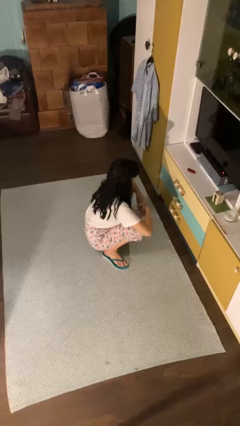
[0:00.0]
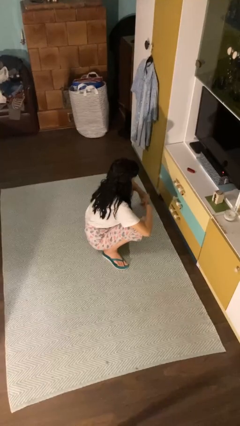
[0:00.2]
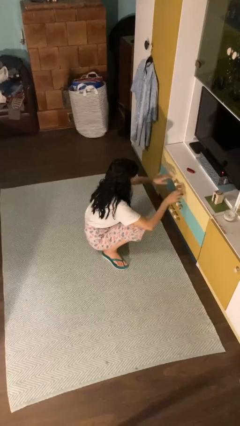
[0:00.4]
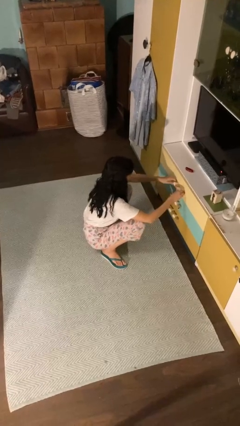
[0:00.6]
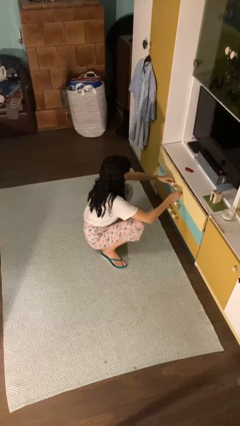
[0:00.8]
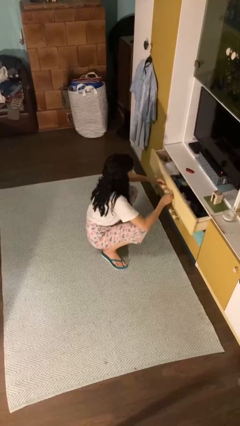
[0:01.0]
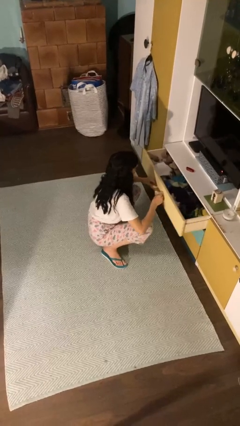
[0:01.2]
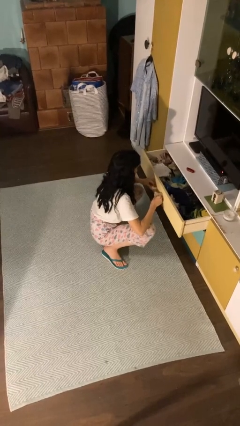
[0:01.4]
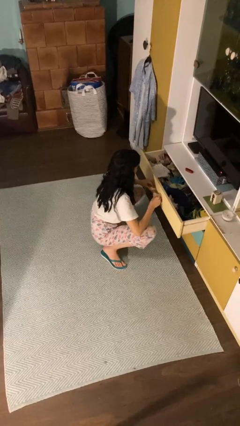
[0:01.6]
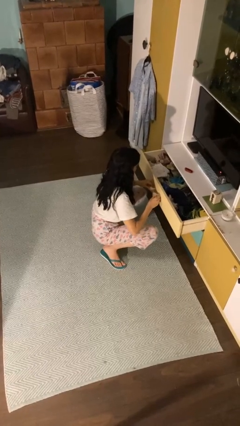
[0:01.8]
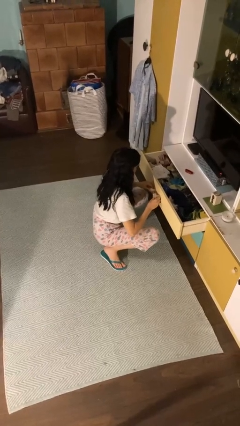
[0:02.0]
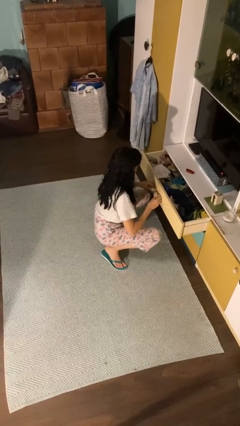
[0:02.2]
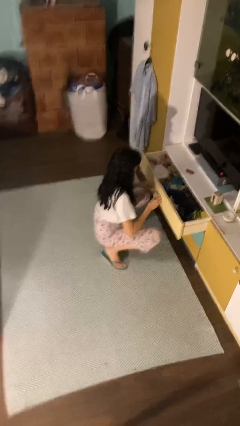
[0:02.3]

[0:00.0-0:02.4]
person opens dresser drawer

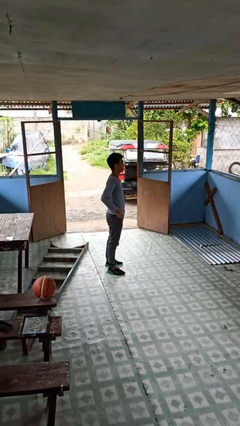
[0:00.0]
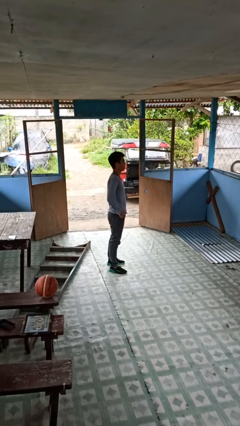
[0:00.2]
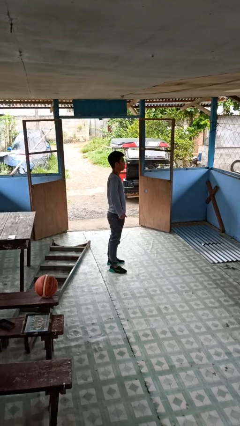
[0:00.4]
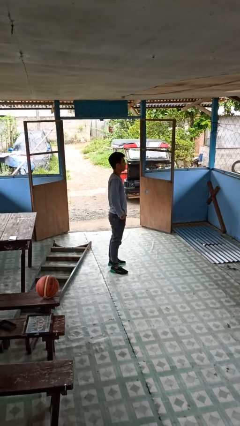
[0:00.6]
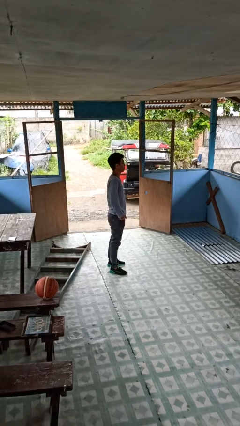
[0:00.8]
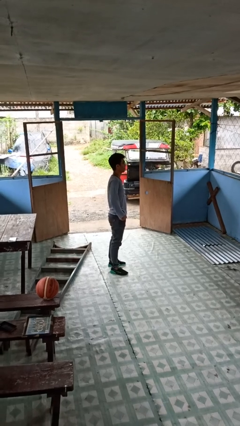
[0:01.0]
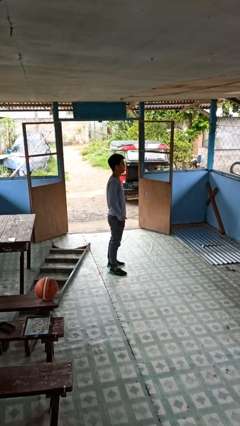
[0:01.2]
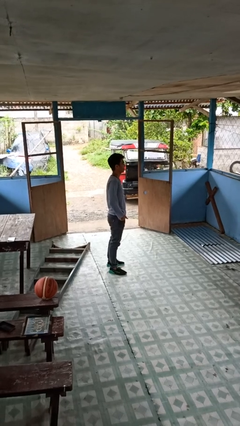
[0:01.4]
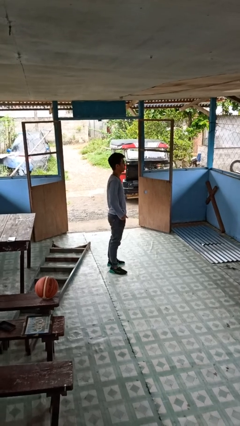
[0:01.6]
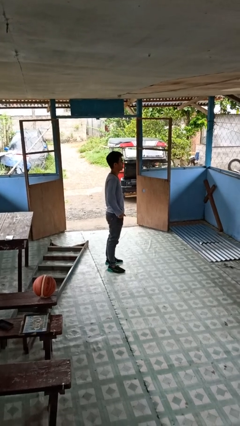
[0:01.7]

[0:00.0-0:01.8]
person puts hands in back pockets

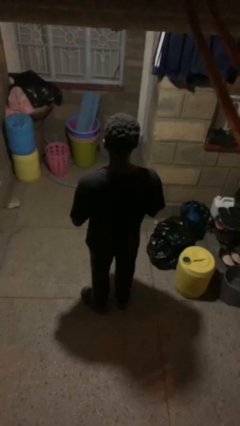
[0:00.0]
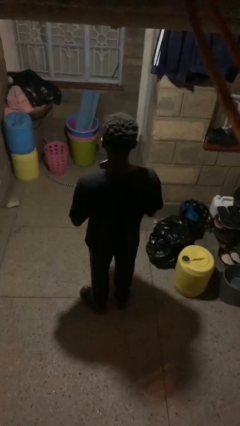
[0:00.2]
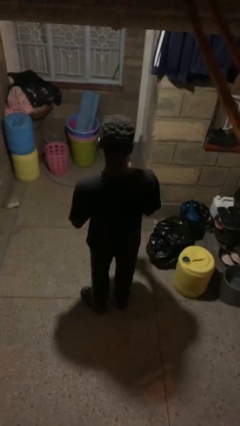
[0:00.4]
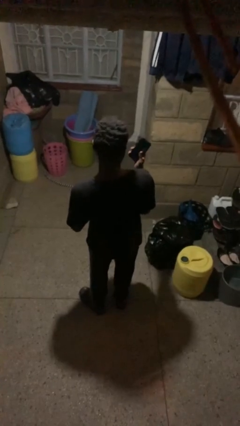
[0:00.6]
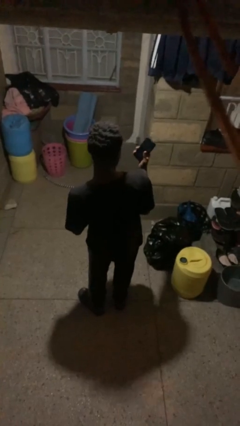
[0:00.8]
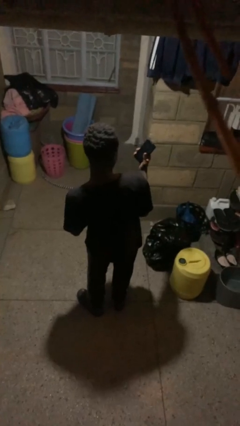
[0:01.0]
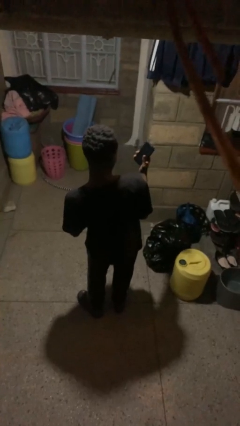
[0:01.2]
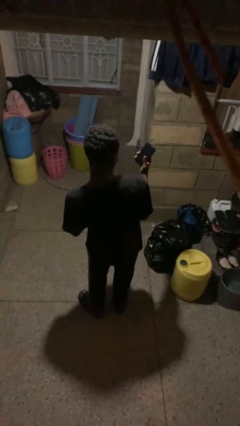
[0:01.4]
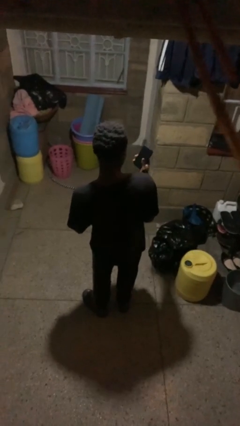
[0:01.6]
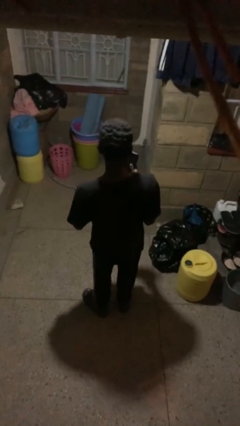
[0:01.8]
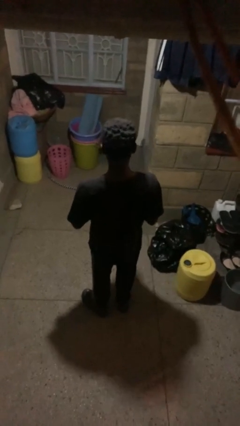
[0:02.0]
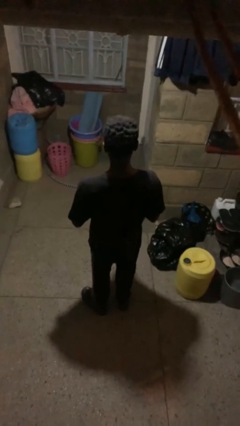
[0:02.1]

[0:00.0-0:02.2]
person takes selfie

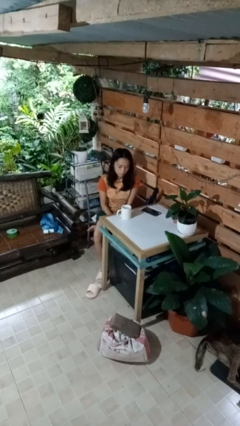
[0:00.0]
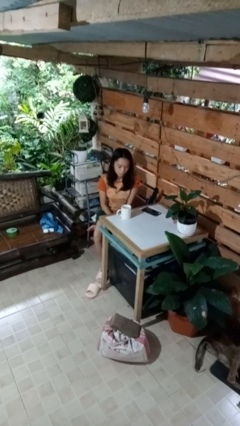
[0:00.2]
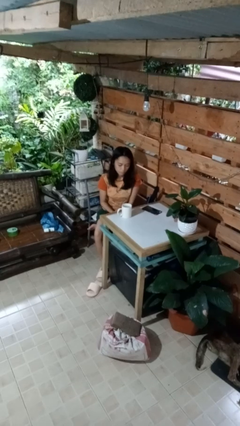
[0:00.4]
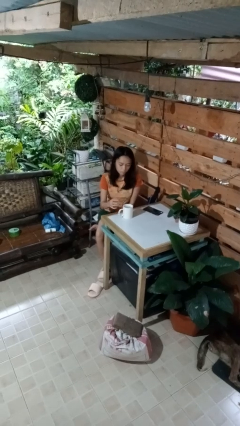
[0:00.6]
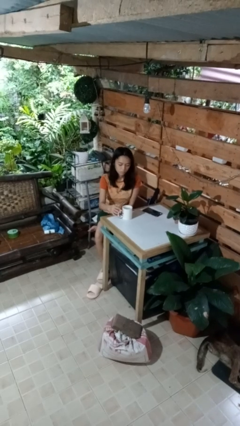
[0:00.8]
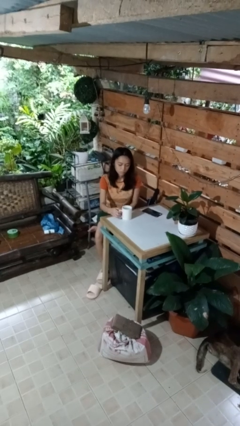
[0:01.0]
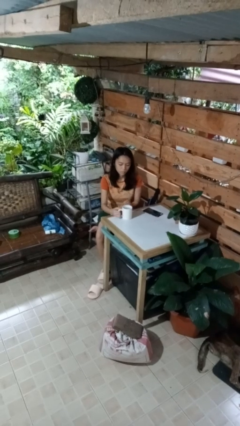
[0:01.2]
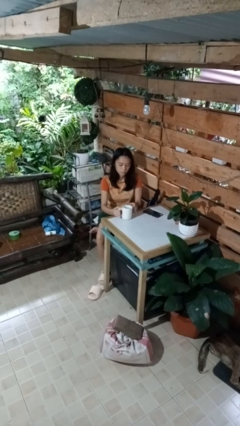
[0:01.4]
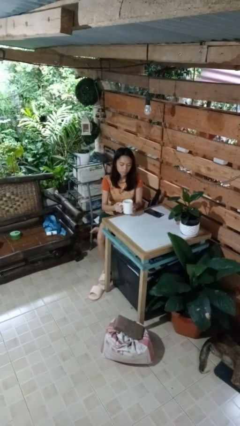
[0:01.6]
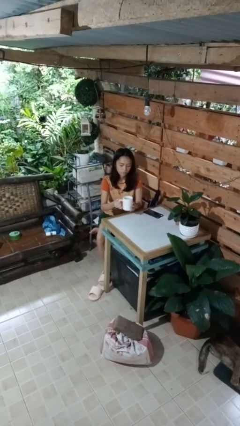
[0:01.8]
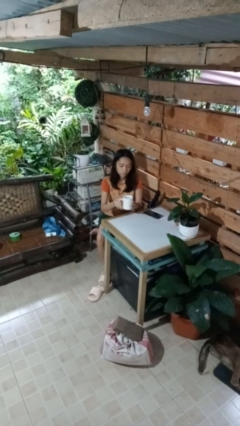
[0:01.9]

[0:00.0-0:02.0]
person picks up object from table

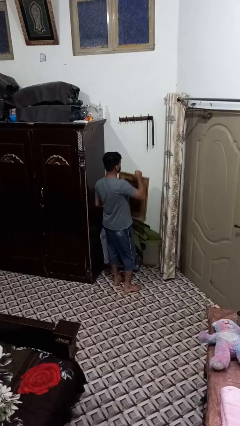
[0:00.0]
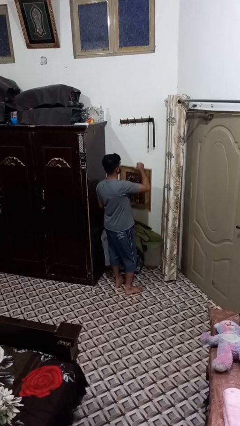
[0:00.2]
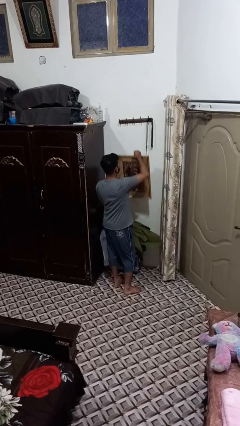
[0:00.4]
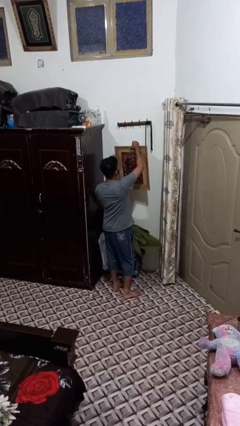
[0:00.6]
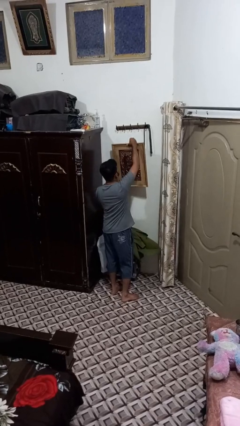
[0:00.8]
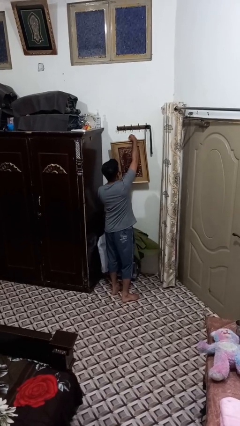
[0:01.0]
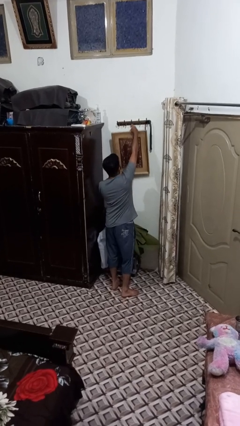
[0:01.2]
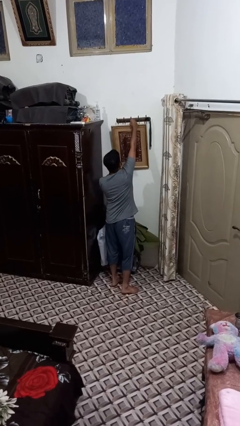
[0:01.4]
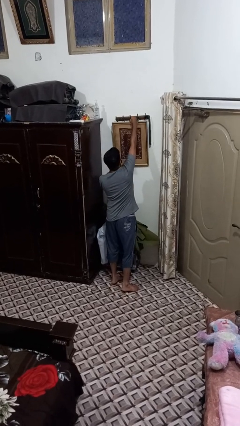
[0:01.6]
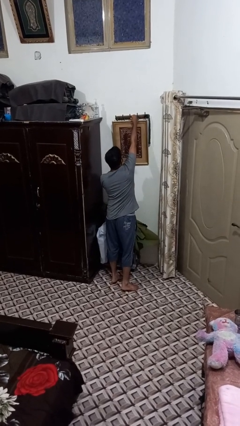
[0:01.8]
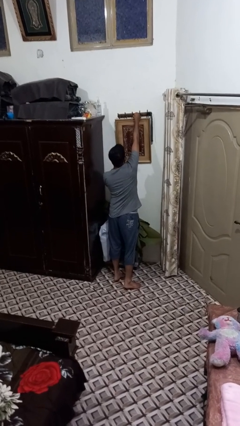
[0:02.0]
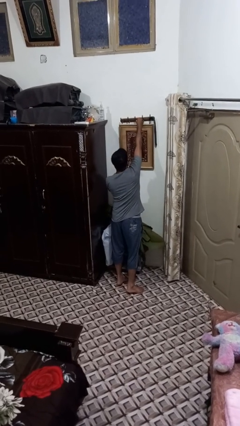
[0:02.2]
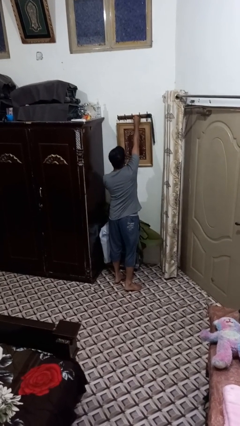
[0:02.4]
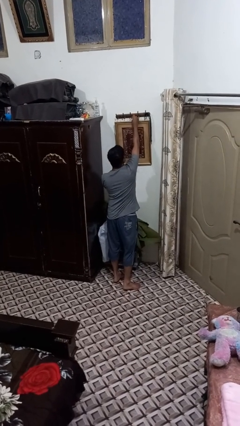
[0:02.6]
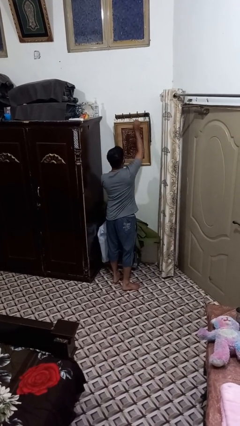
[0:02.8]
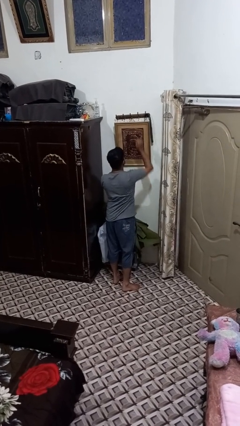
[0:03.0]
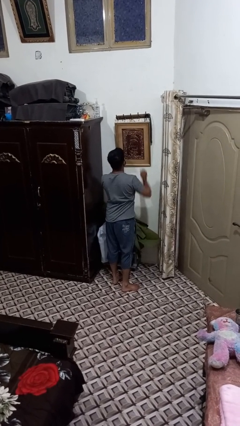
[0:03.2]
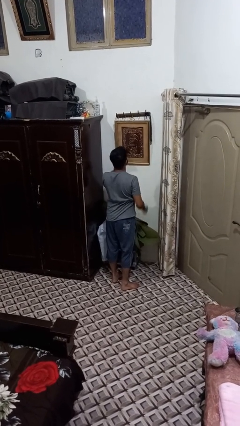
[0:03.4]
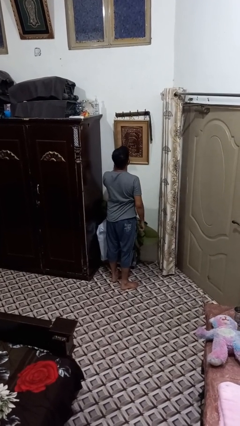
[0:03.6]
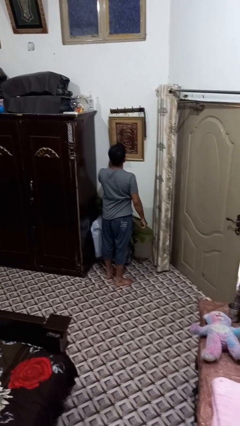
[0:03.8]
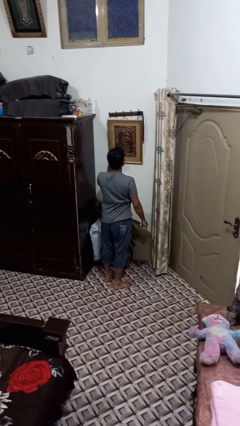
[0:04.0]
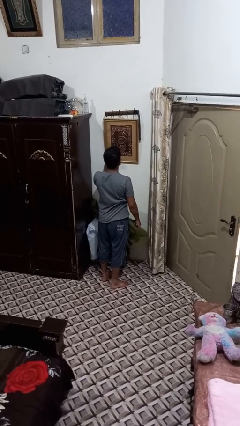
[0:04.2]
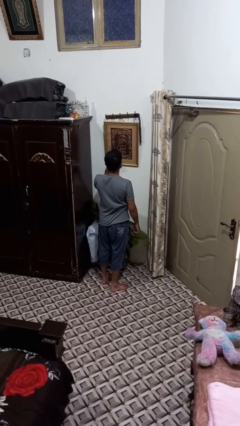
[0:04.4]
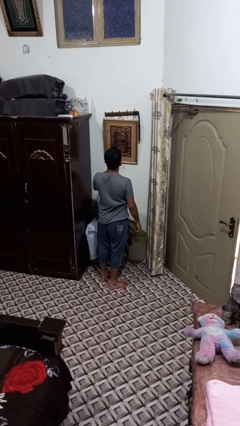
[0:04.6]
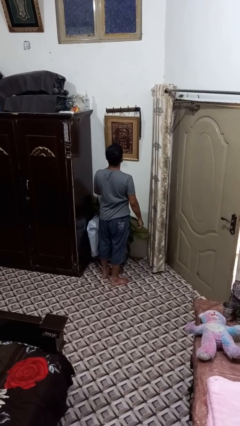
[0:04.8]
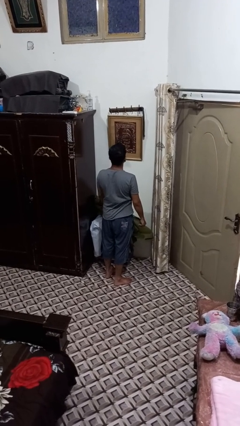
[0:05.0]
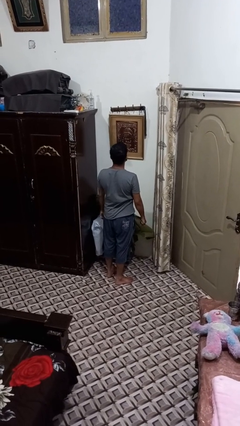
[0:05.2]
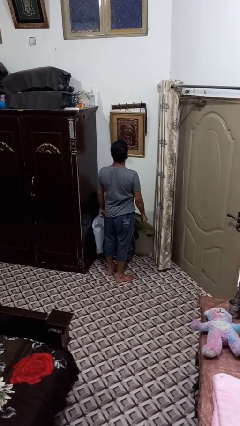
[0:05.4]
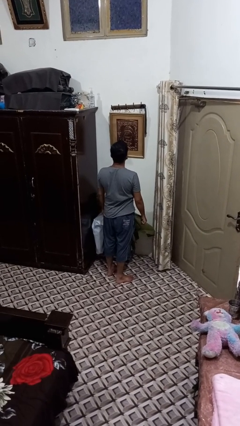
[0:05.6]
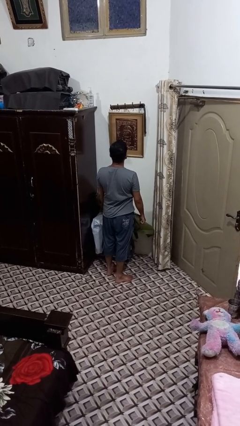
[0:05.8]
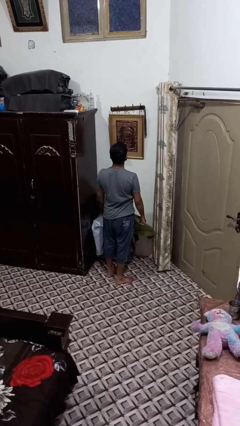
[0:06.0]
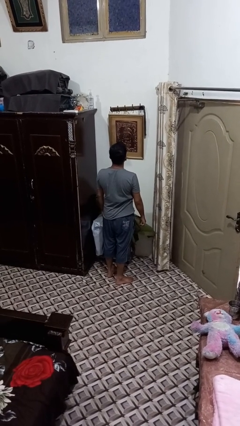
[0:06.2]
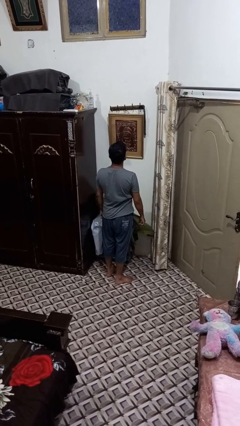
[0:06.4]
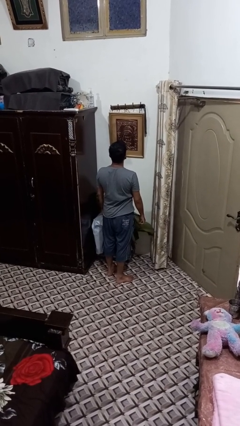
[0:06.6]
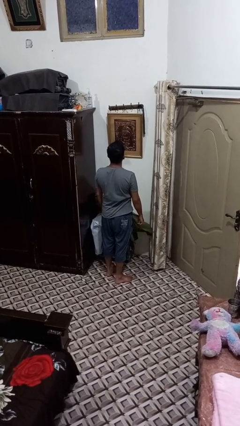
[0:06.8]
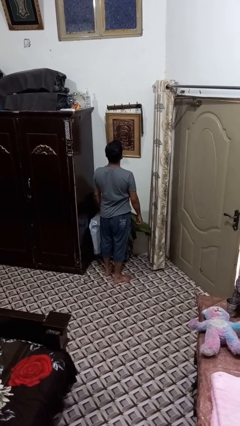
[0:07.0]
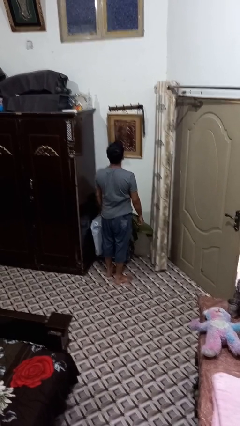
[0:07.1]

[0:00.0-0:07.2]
person puts up picture frame

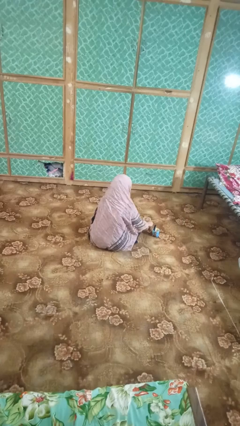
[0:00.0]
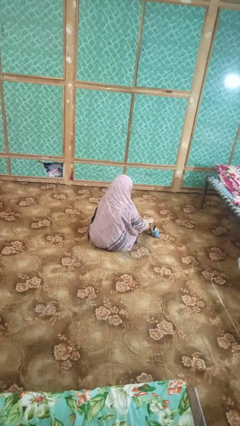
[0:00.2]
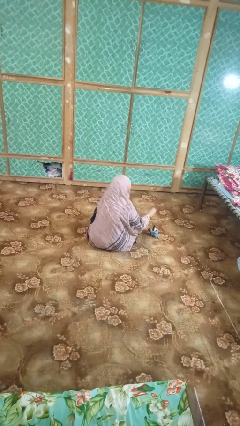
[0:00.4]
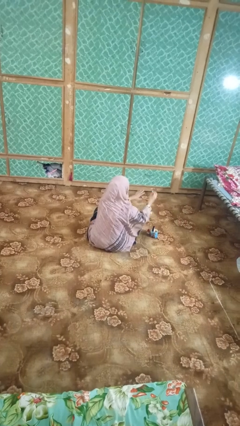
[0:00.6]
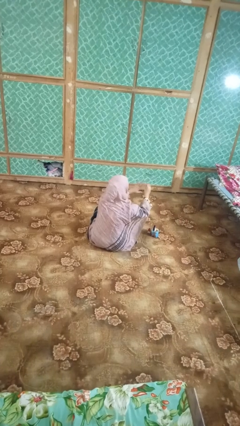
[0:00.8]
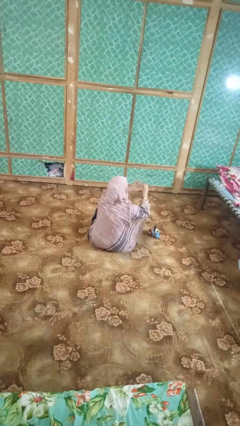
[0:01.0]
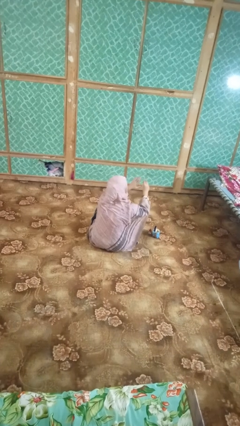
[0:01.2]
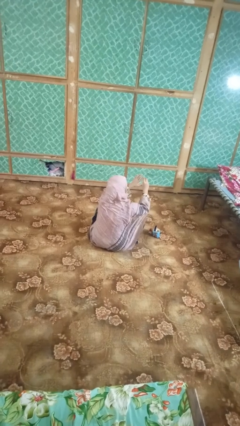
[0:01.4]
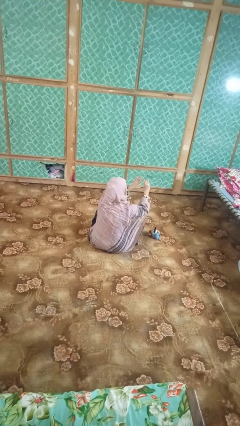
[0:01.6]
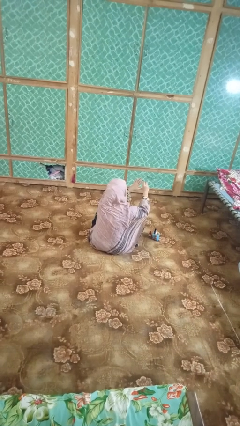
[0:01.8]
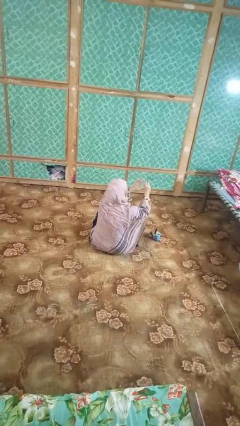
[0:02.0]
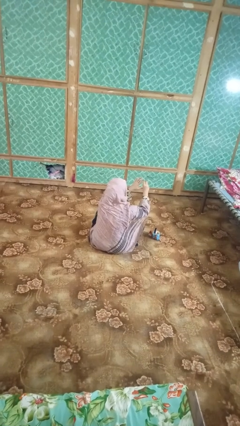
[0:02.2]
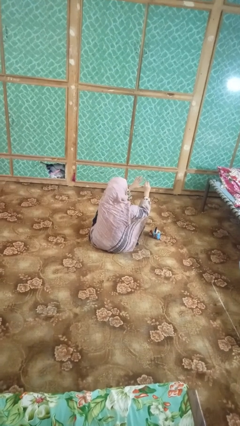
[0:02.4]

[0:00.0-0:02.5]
person paints fingernails
